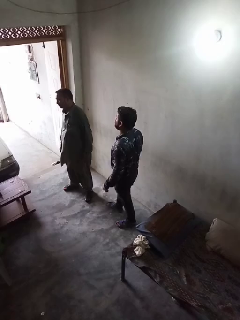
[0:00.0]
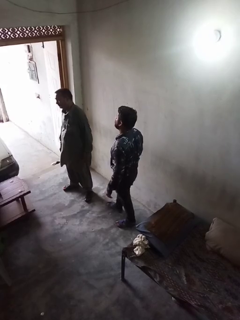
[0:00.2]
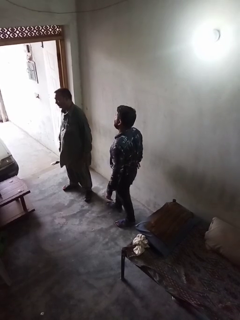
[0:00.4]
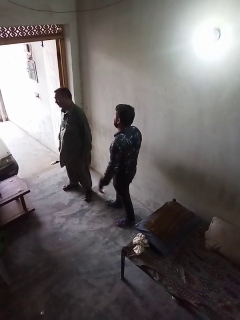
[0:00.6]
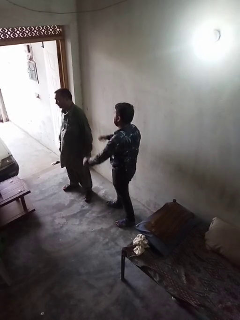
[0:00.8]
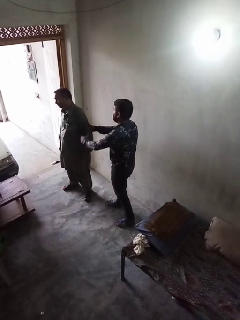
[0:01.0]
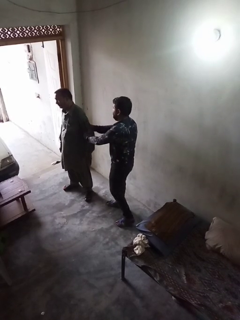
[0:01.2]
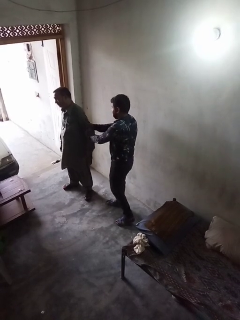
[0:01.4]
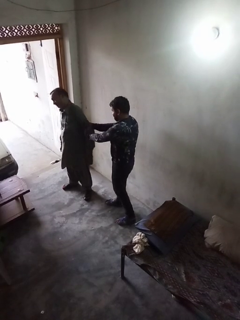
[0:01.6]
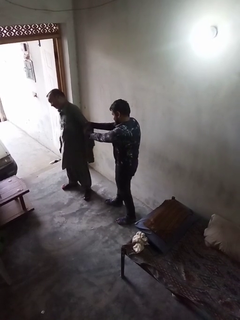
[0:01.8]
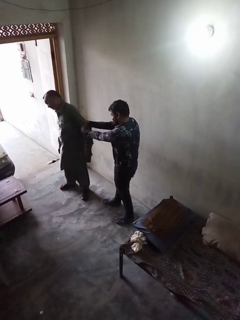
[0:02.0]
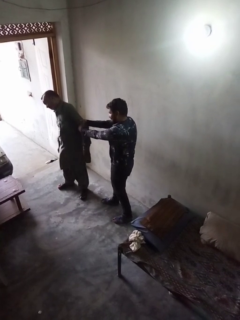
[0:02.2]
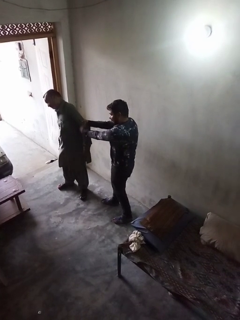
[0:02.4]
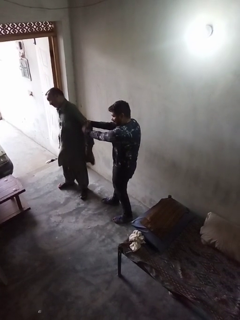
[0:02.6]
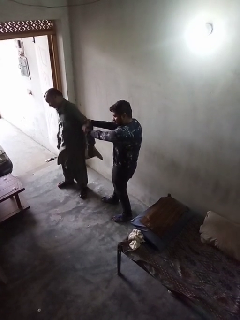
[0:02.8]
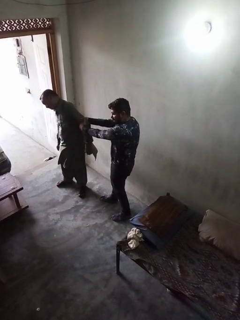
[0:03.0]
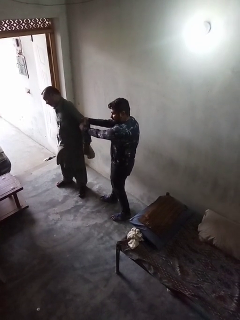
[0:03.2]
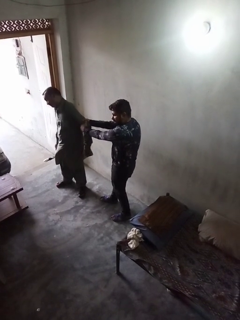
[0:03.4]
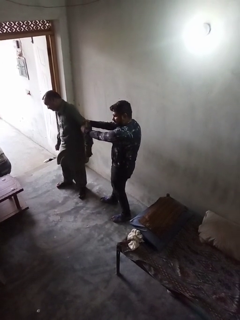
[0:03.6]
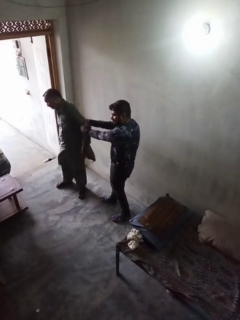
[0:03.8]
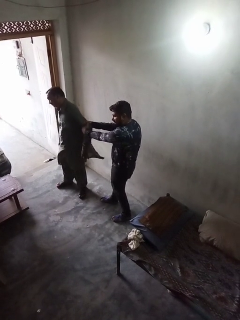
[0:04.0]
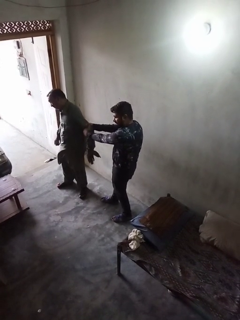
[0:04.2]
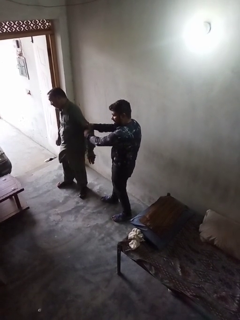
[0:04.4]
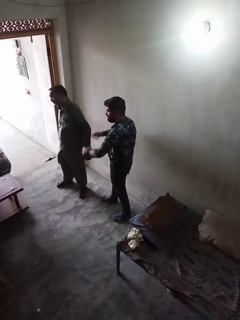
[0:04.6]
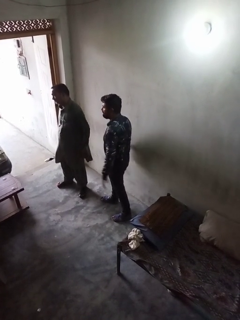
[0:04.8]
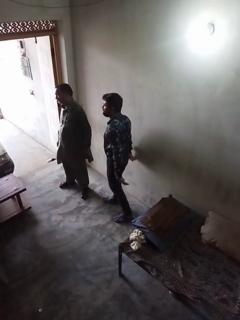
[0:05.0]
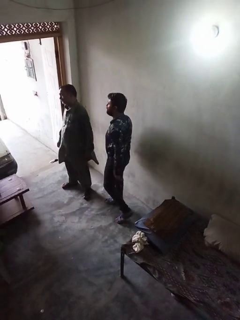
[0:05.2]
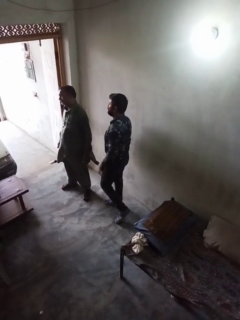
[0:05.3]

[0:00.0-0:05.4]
person grabs person by forearm

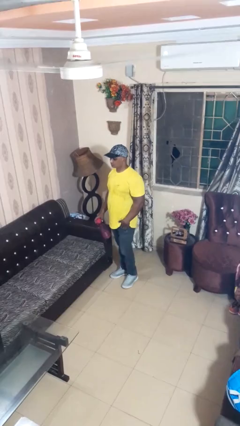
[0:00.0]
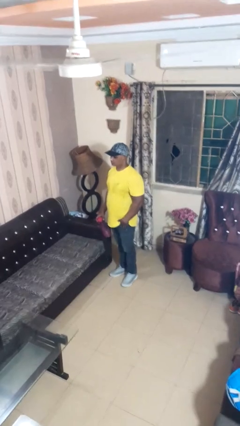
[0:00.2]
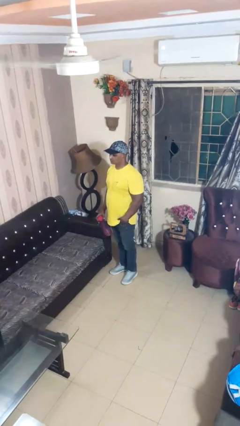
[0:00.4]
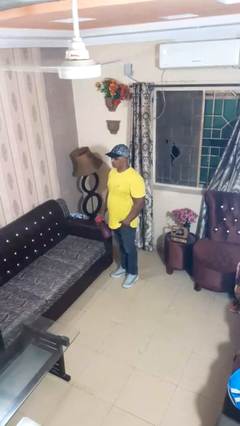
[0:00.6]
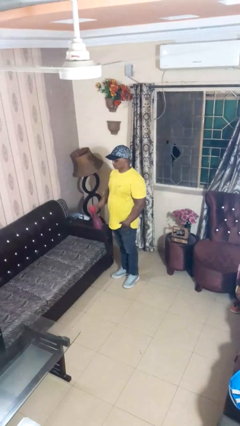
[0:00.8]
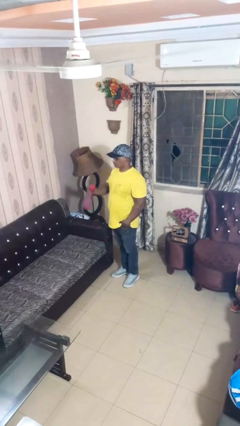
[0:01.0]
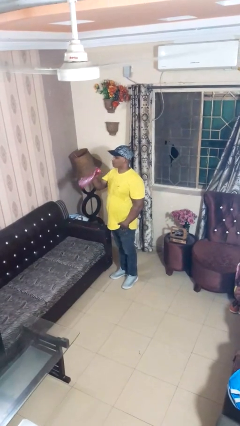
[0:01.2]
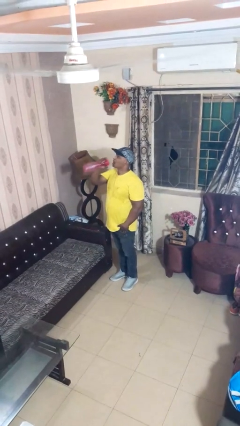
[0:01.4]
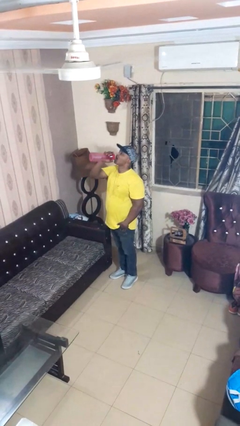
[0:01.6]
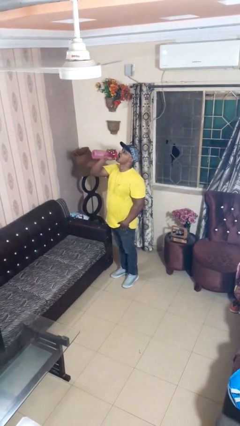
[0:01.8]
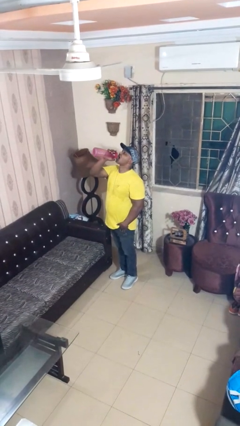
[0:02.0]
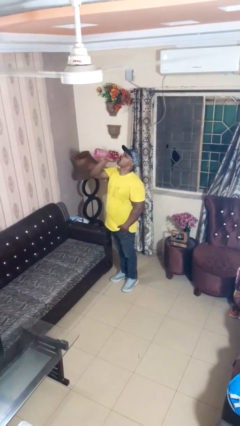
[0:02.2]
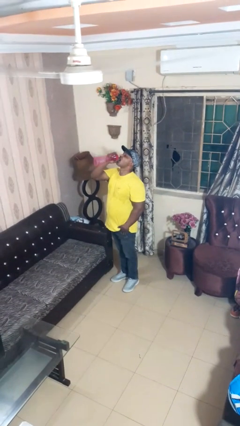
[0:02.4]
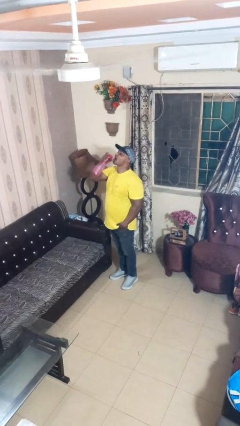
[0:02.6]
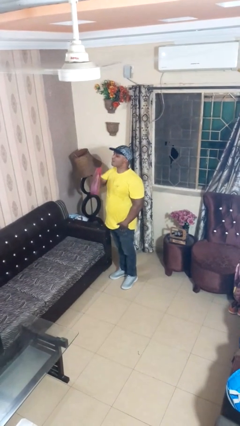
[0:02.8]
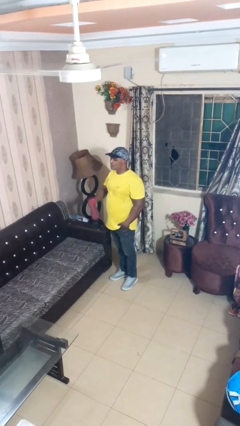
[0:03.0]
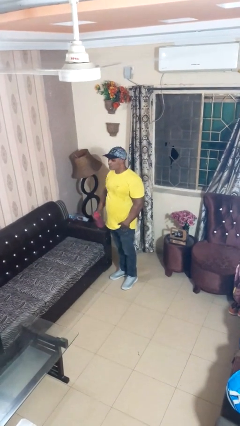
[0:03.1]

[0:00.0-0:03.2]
person drinks from bottle

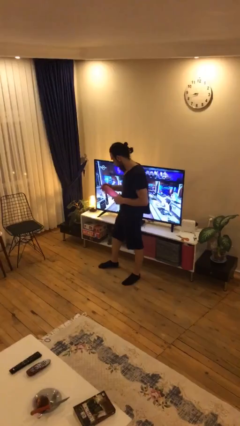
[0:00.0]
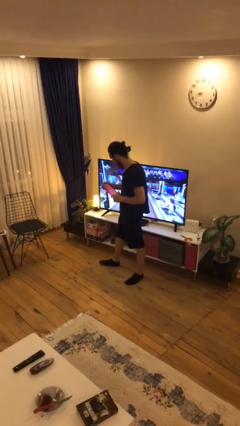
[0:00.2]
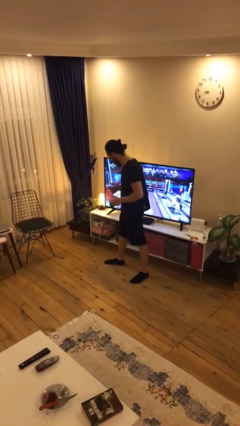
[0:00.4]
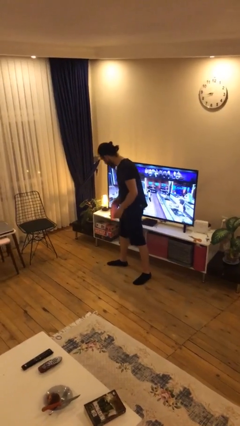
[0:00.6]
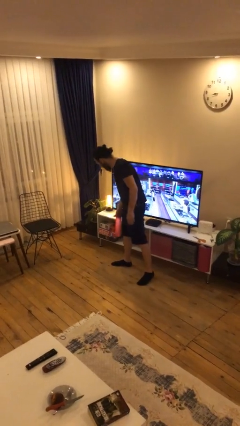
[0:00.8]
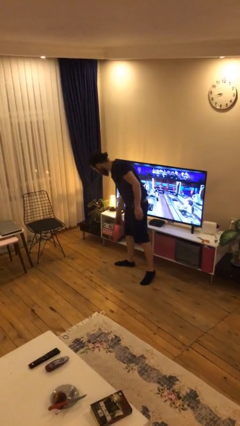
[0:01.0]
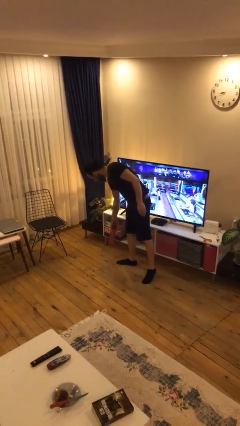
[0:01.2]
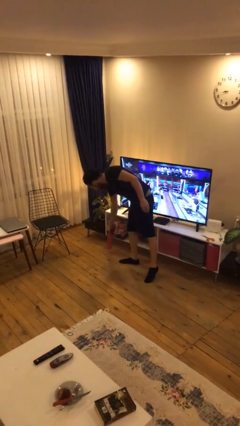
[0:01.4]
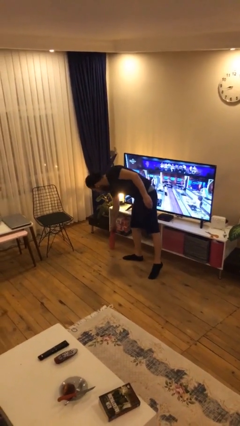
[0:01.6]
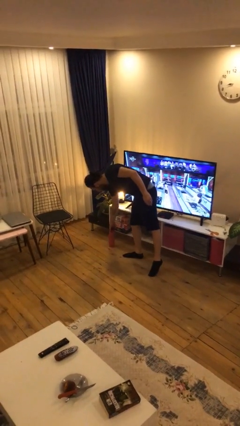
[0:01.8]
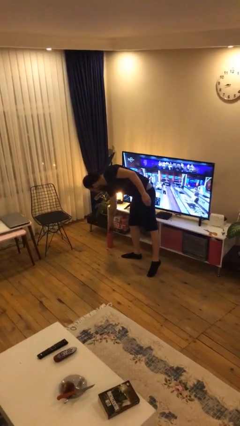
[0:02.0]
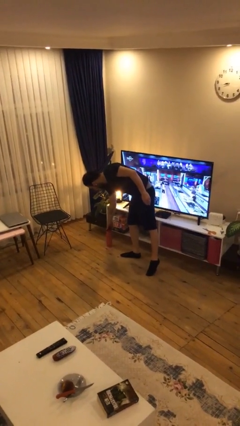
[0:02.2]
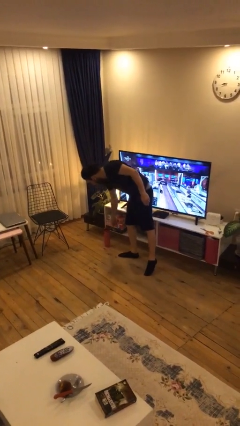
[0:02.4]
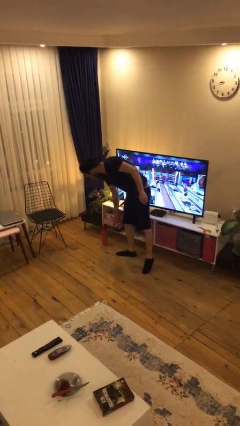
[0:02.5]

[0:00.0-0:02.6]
person puts down object on floor

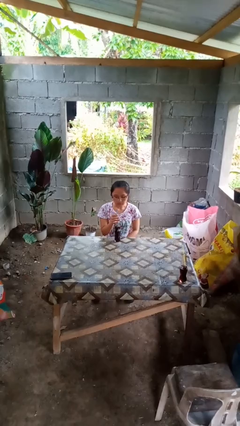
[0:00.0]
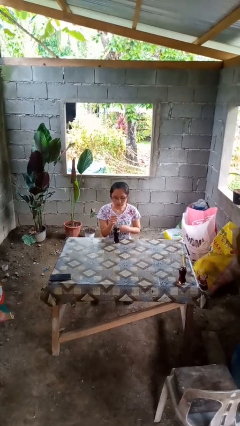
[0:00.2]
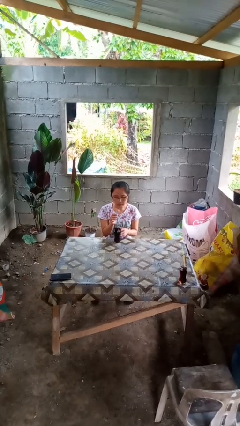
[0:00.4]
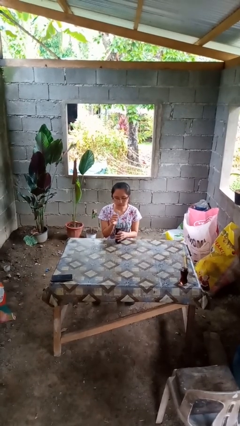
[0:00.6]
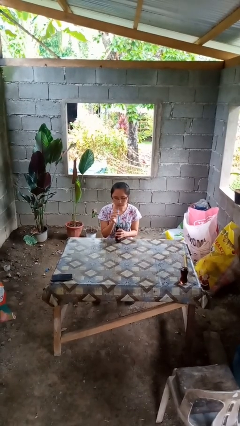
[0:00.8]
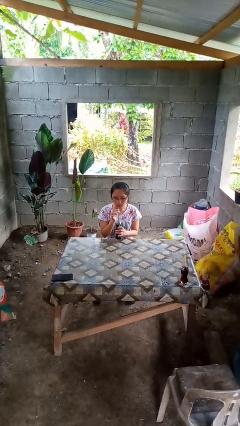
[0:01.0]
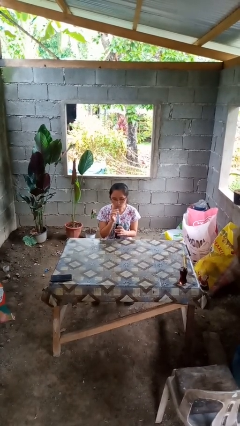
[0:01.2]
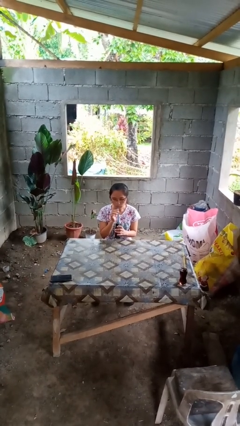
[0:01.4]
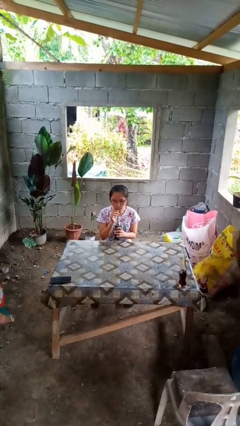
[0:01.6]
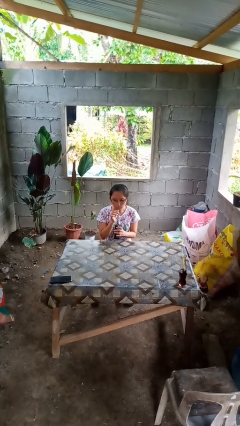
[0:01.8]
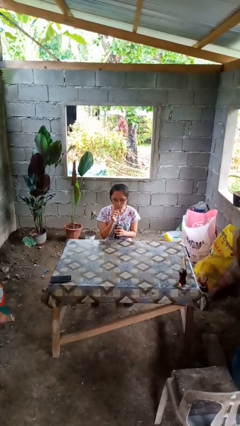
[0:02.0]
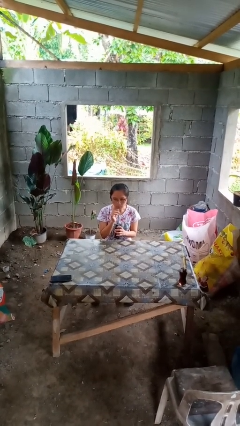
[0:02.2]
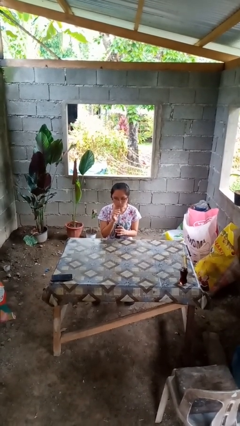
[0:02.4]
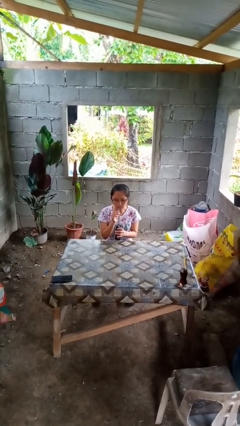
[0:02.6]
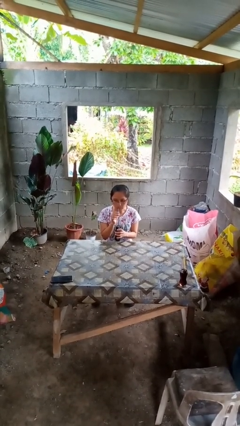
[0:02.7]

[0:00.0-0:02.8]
person drinks from straw

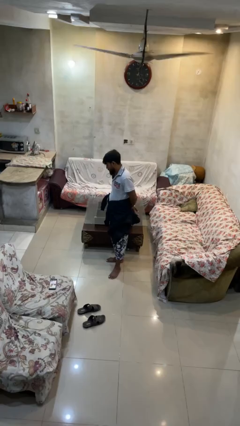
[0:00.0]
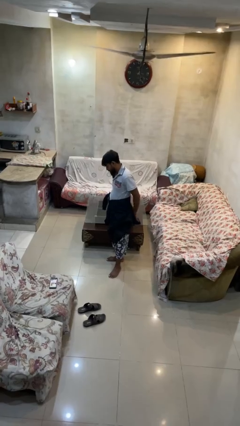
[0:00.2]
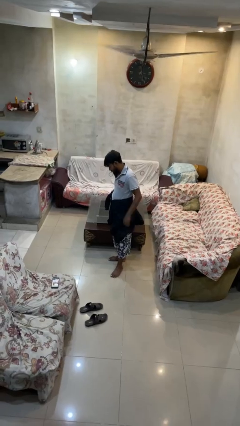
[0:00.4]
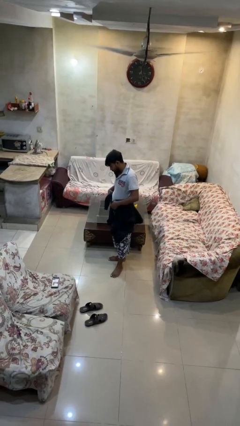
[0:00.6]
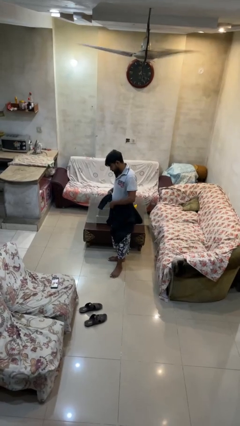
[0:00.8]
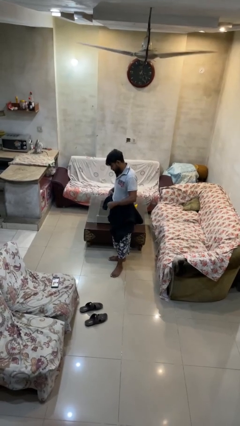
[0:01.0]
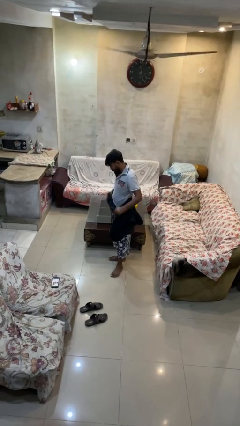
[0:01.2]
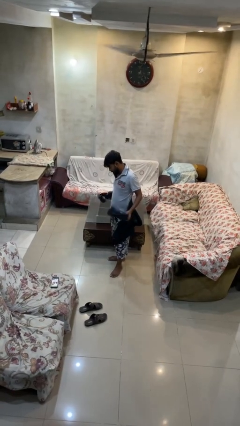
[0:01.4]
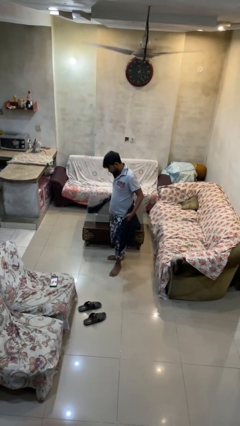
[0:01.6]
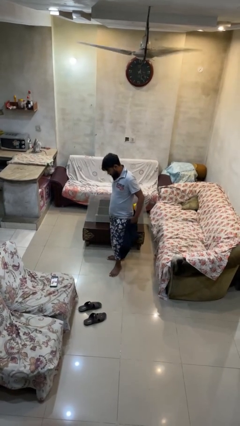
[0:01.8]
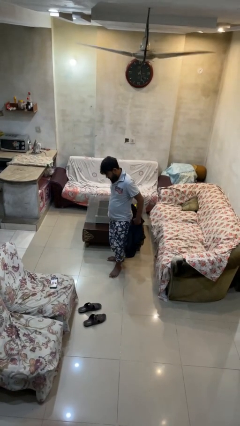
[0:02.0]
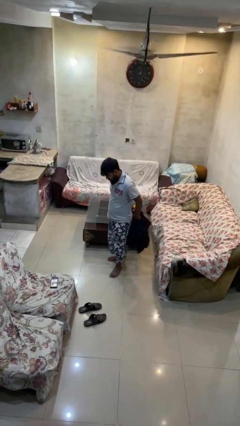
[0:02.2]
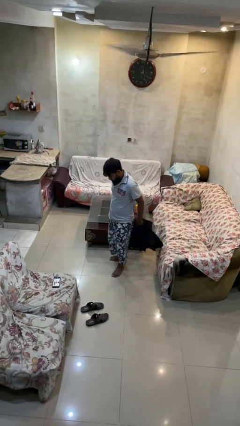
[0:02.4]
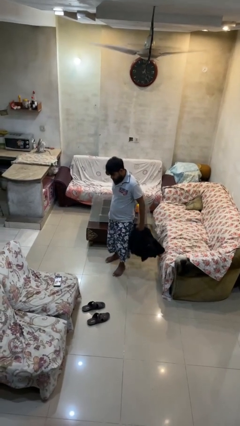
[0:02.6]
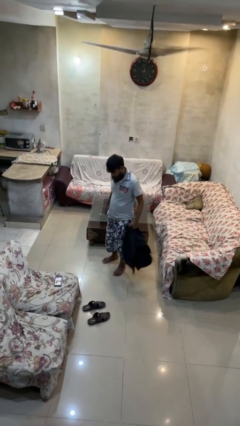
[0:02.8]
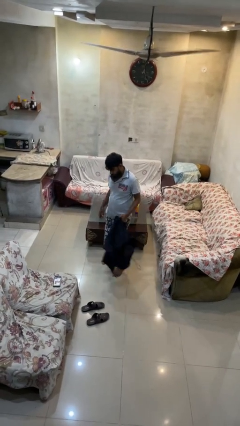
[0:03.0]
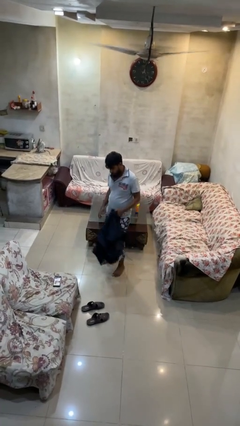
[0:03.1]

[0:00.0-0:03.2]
person unties jacket around waist

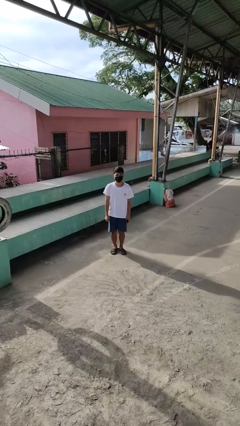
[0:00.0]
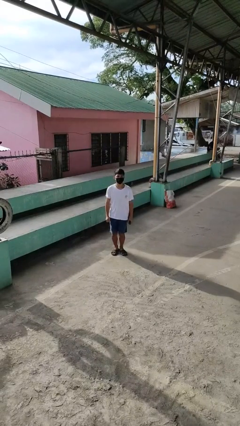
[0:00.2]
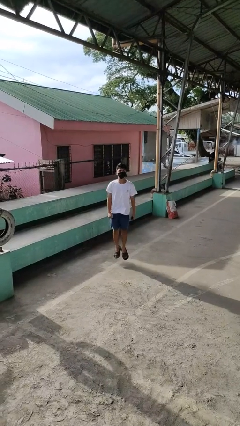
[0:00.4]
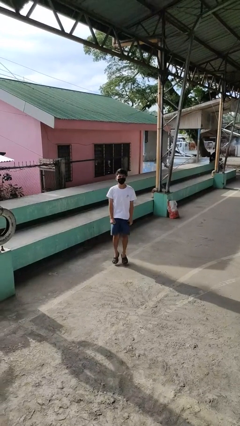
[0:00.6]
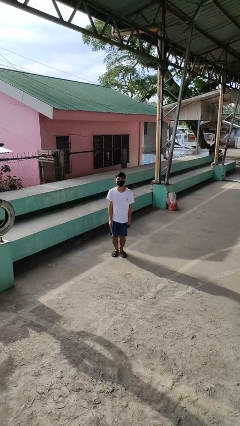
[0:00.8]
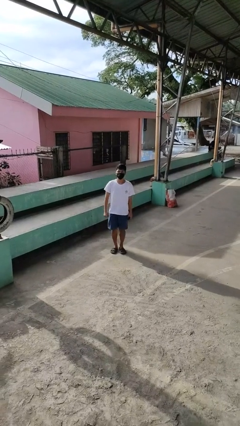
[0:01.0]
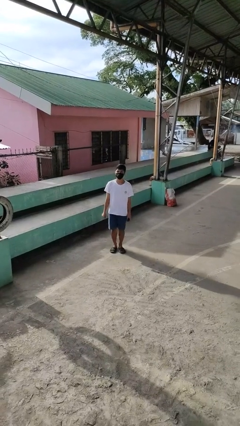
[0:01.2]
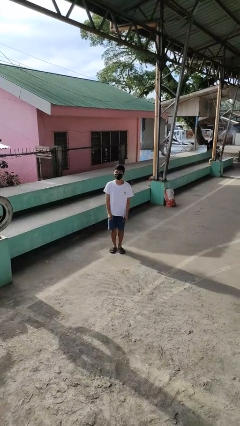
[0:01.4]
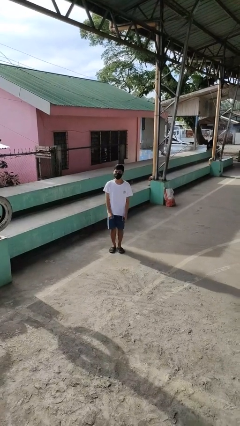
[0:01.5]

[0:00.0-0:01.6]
person jumps
